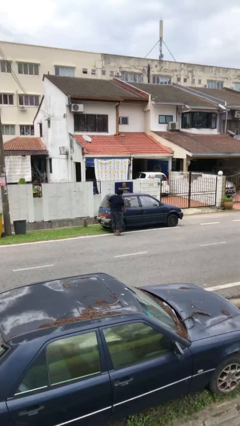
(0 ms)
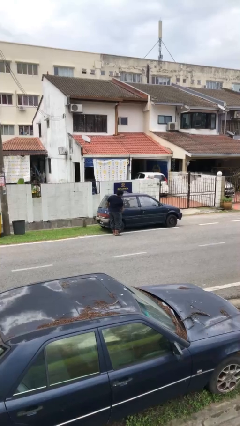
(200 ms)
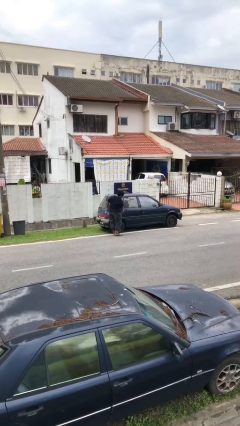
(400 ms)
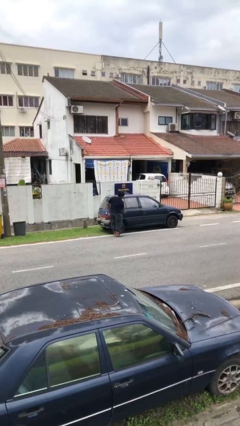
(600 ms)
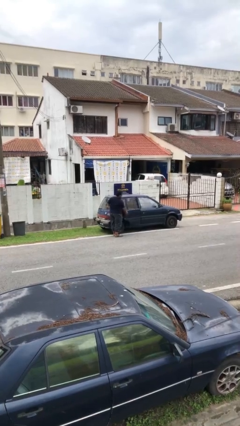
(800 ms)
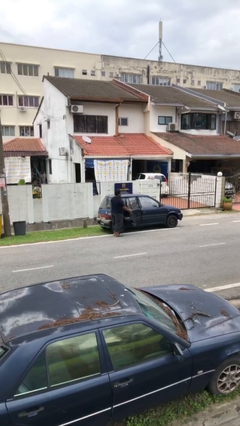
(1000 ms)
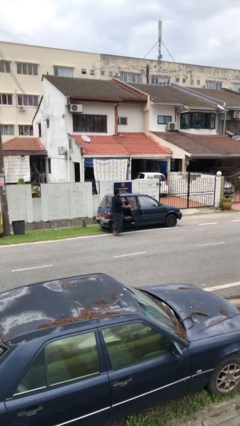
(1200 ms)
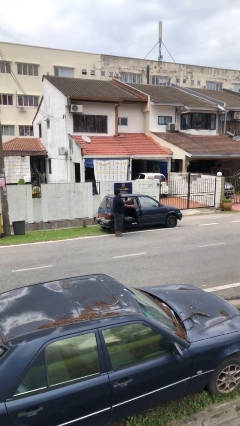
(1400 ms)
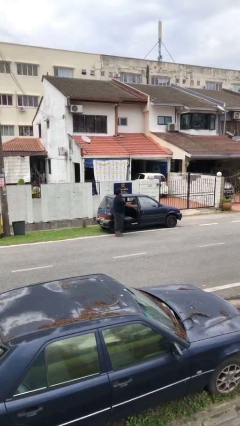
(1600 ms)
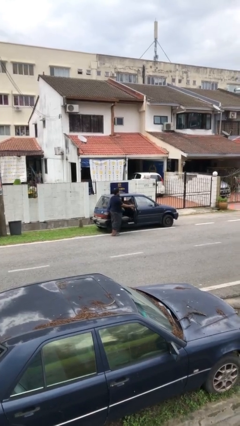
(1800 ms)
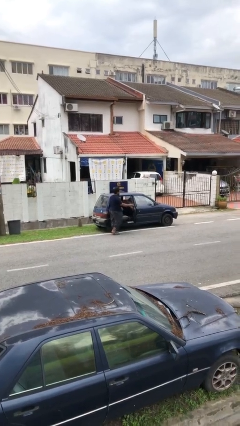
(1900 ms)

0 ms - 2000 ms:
person opens car door

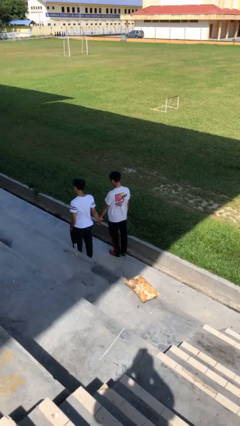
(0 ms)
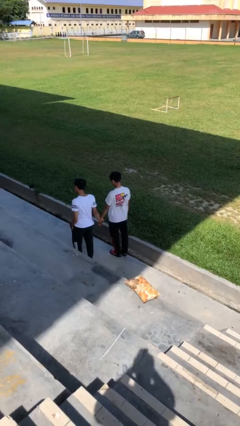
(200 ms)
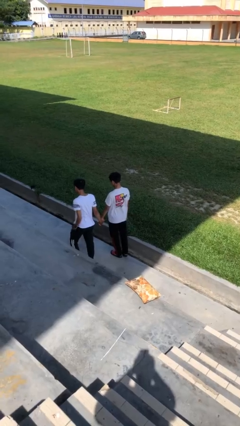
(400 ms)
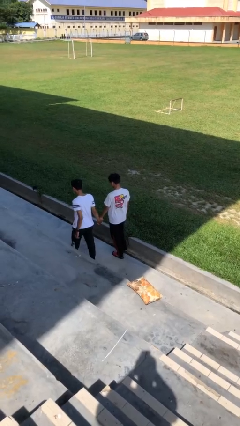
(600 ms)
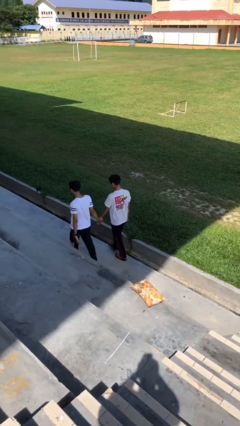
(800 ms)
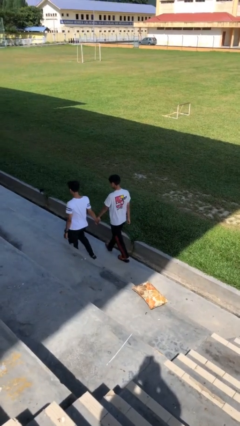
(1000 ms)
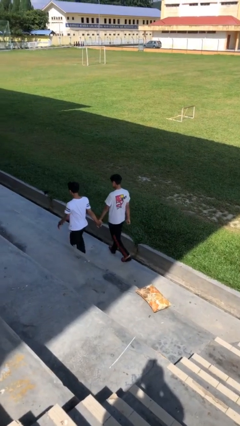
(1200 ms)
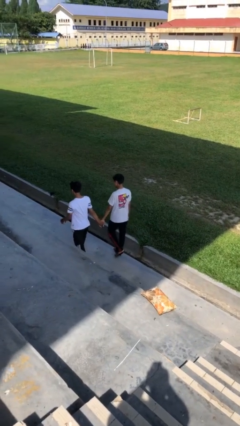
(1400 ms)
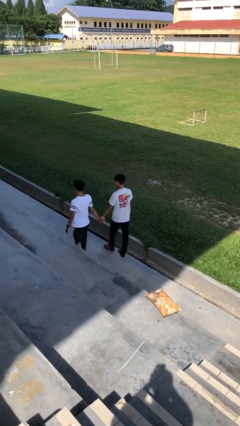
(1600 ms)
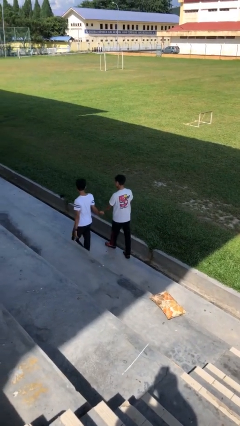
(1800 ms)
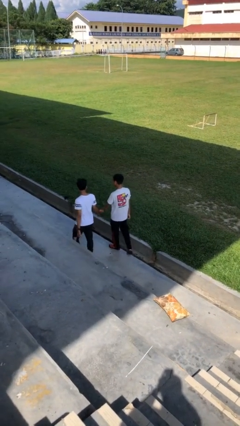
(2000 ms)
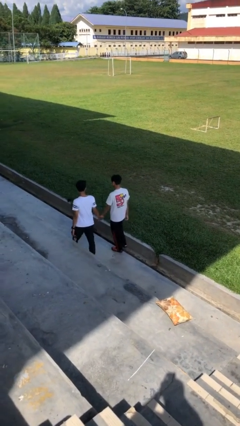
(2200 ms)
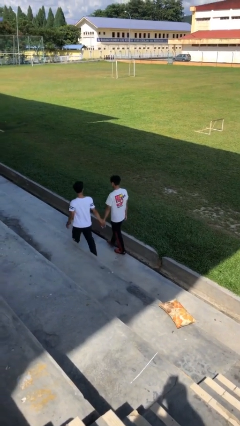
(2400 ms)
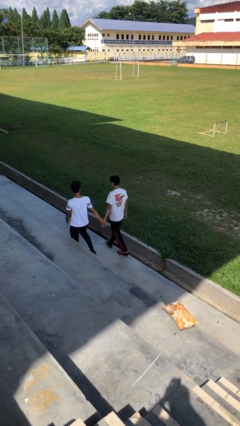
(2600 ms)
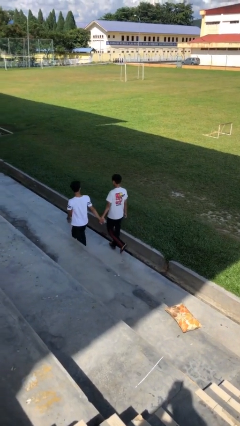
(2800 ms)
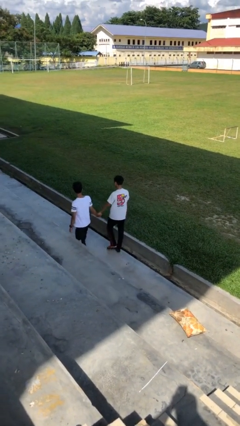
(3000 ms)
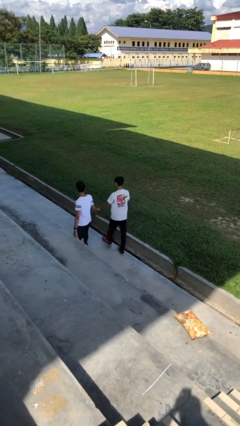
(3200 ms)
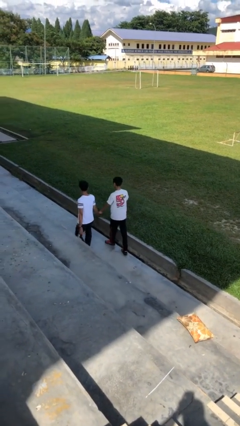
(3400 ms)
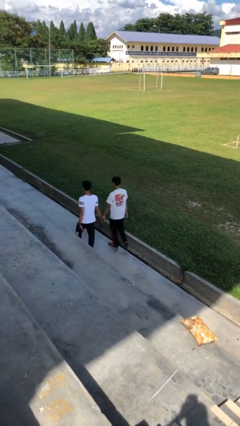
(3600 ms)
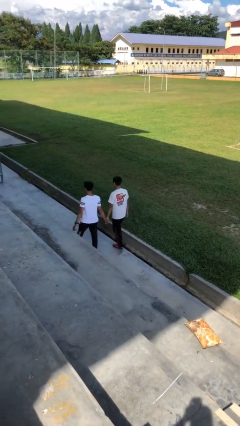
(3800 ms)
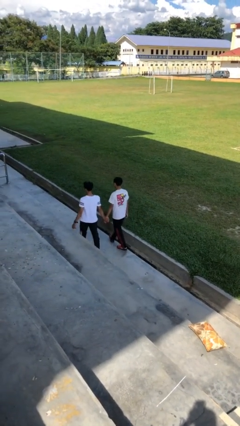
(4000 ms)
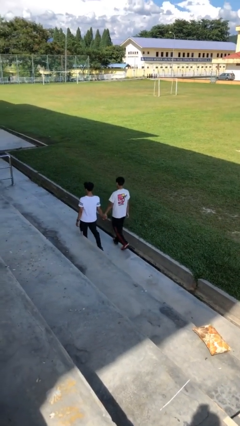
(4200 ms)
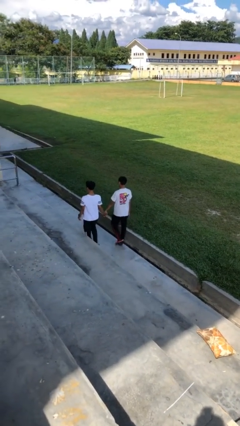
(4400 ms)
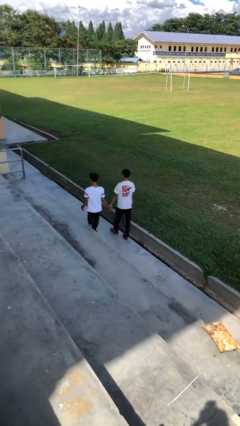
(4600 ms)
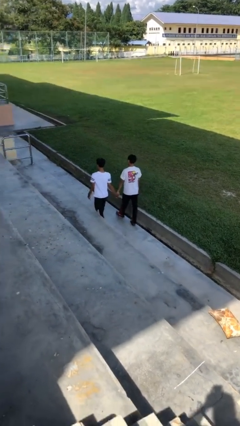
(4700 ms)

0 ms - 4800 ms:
person holds hand

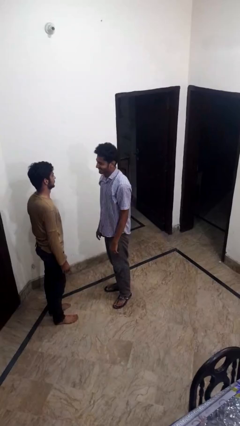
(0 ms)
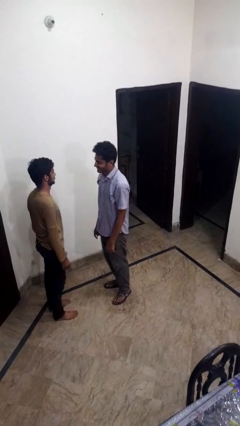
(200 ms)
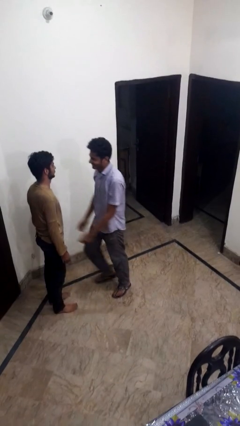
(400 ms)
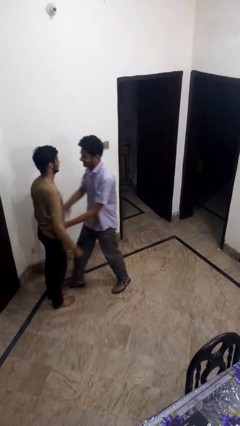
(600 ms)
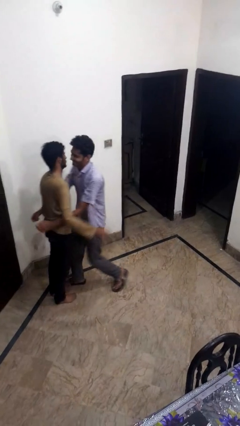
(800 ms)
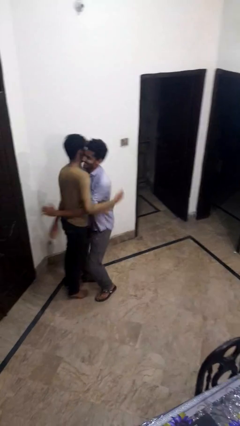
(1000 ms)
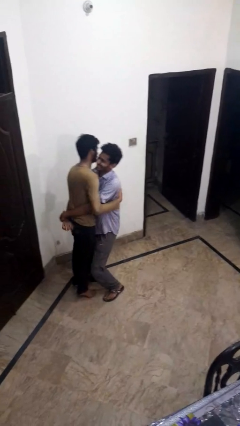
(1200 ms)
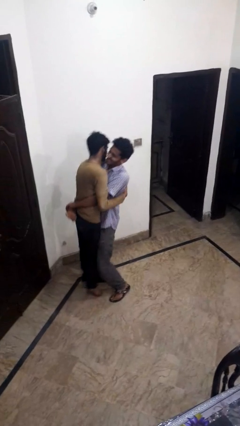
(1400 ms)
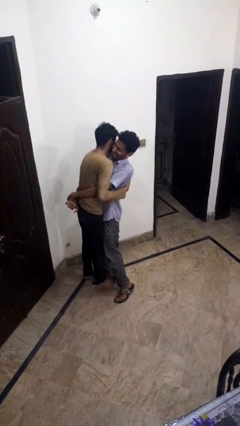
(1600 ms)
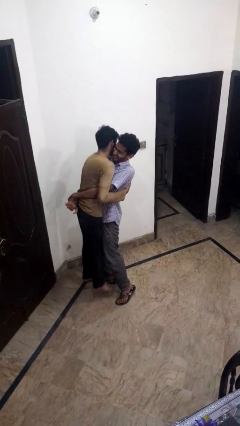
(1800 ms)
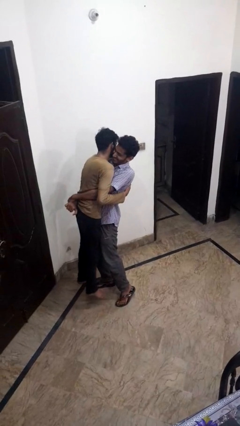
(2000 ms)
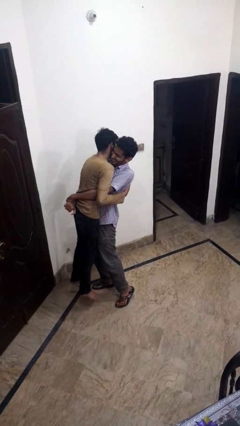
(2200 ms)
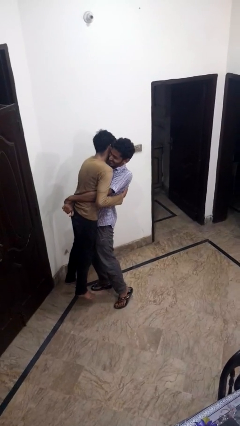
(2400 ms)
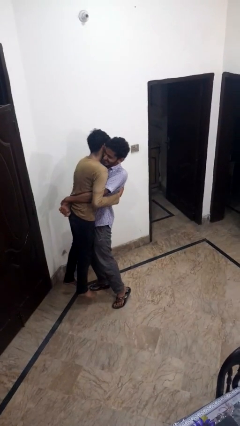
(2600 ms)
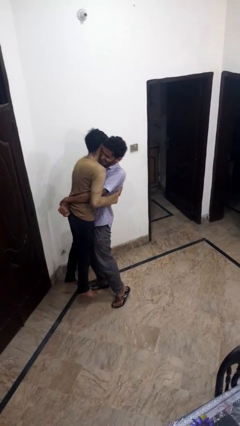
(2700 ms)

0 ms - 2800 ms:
person picks up person

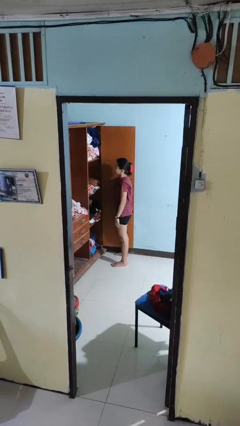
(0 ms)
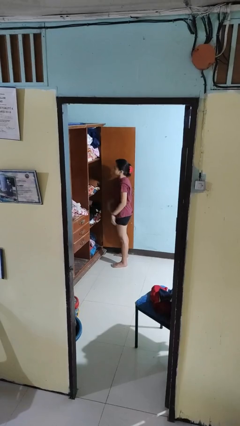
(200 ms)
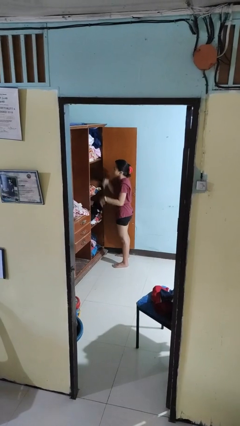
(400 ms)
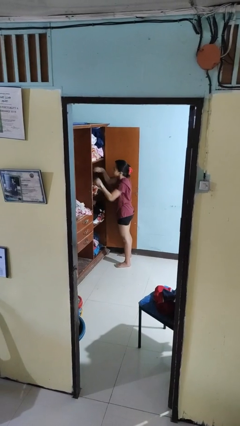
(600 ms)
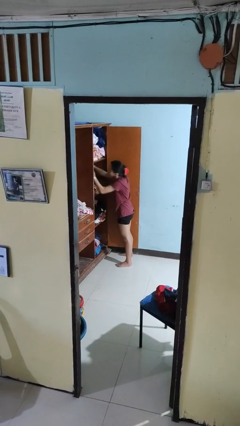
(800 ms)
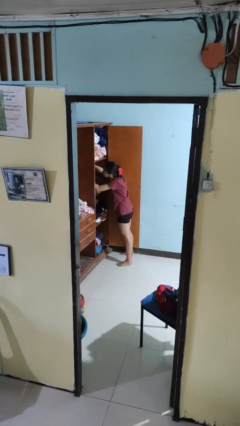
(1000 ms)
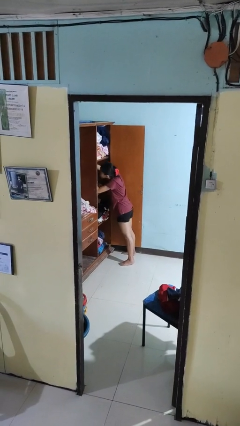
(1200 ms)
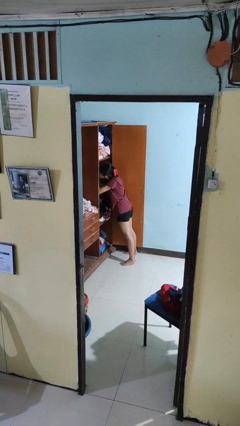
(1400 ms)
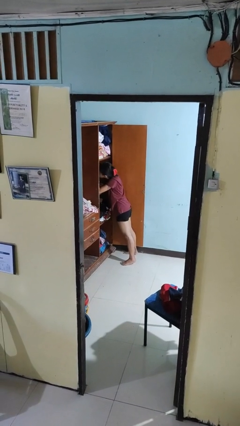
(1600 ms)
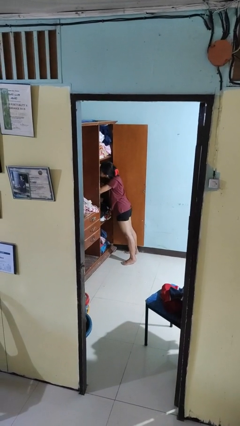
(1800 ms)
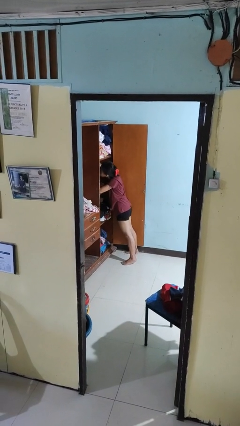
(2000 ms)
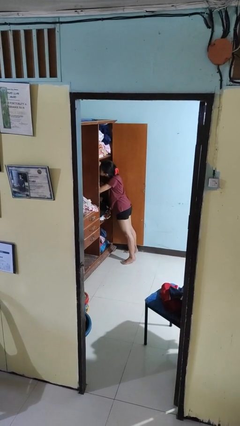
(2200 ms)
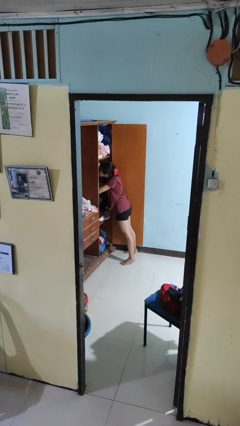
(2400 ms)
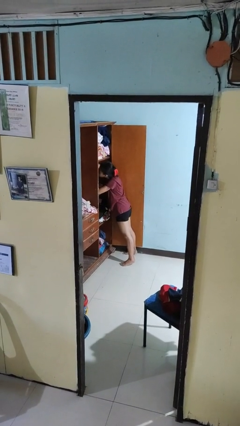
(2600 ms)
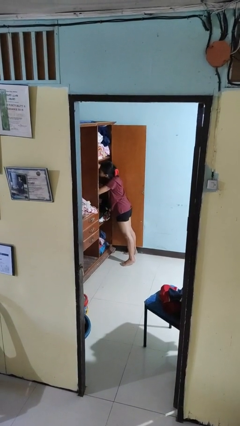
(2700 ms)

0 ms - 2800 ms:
person searches in cabinet

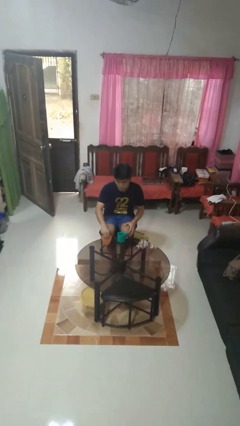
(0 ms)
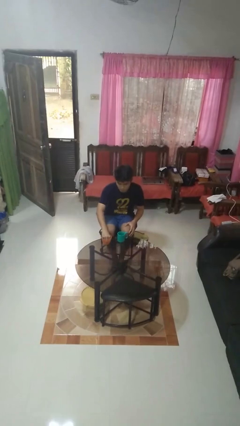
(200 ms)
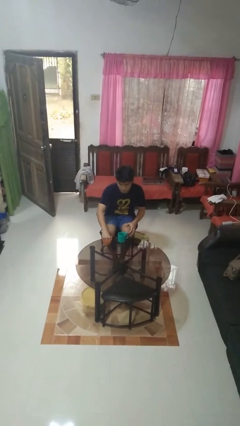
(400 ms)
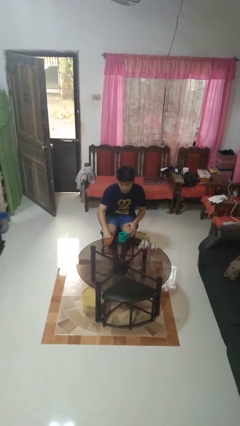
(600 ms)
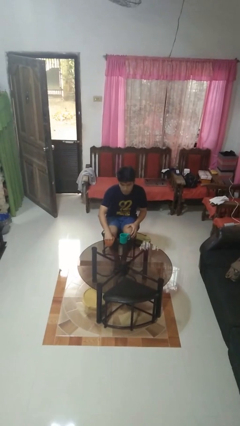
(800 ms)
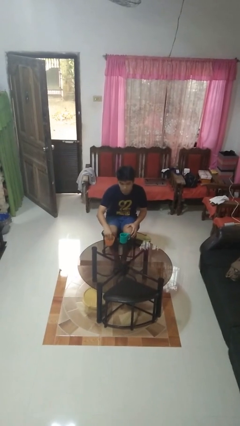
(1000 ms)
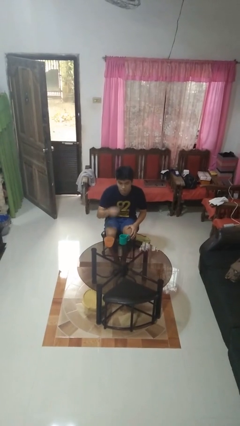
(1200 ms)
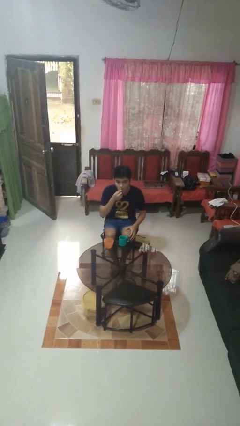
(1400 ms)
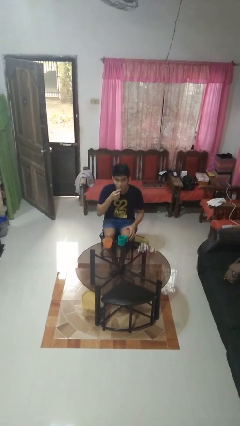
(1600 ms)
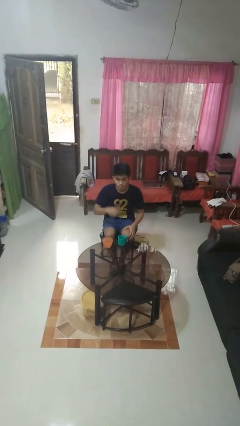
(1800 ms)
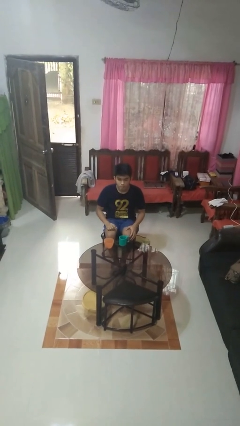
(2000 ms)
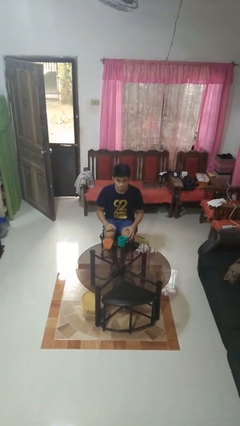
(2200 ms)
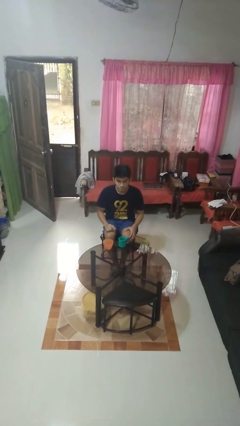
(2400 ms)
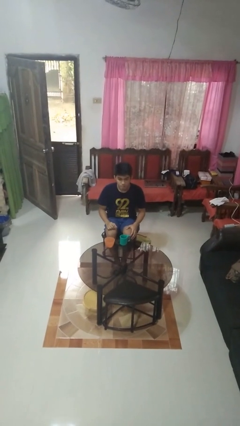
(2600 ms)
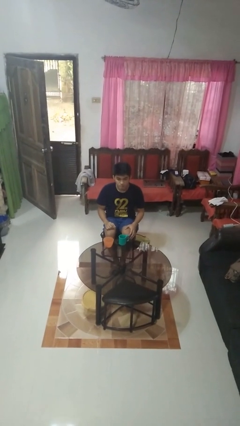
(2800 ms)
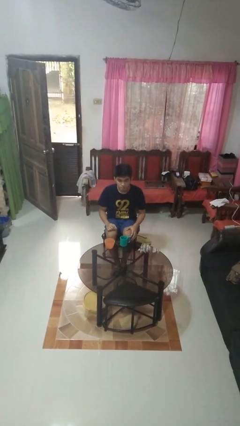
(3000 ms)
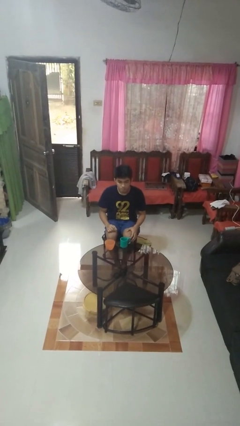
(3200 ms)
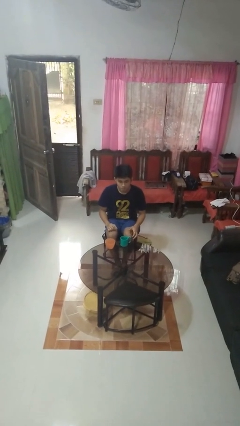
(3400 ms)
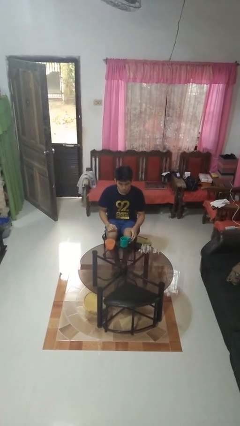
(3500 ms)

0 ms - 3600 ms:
person takes medicine pills

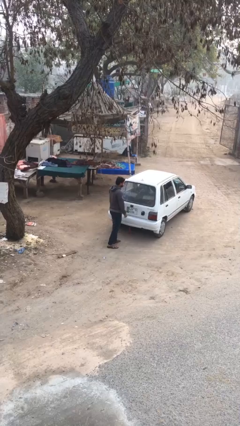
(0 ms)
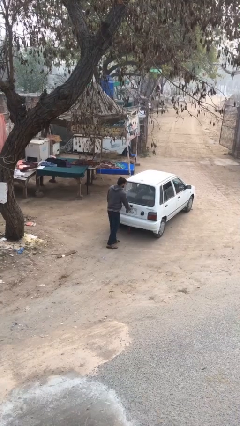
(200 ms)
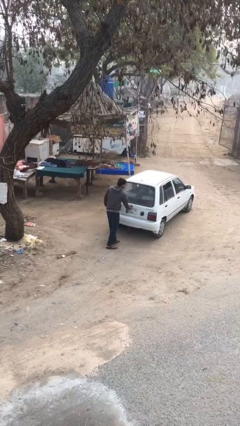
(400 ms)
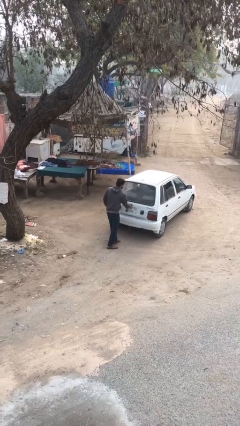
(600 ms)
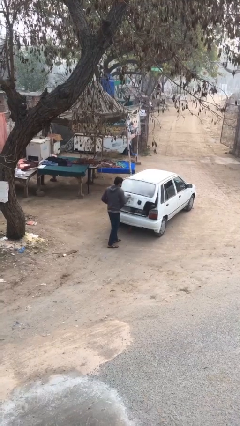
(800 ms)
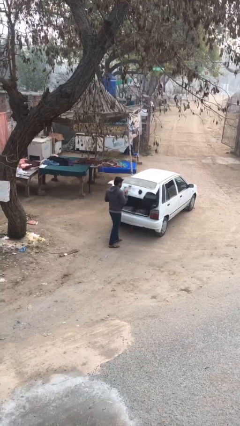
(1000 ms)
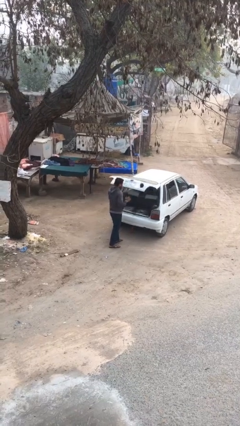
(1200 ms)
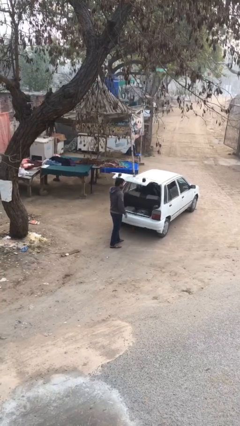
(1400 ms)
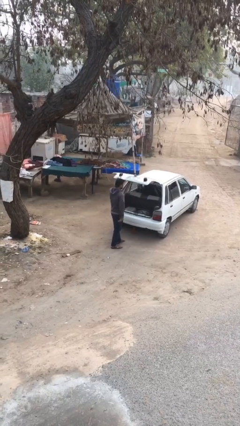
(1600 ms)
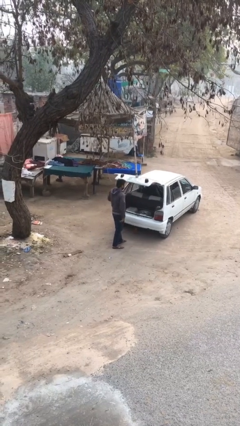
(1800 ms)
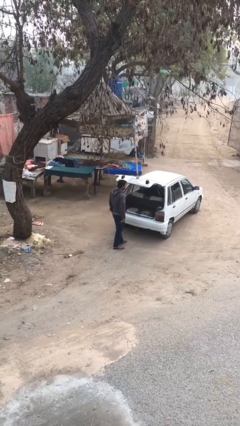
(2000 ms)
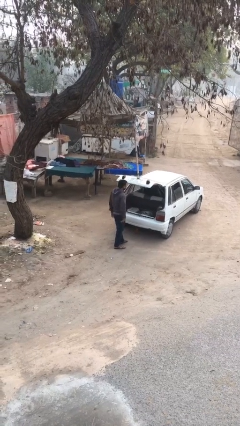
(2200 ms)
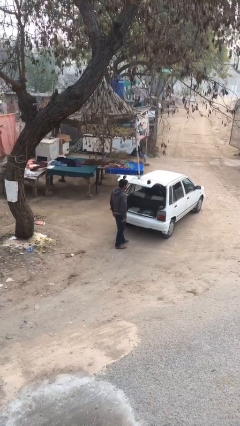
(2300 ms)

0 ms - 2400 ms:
person opens car trunk
